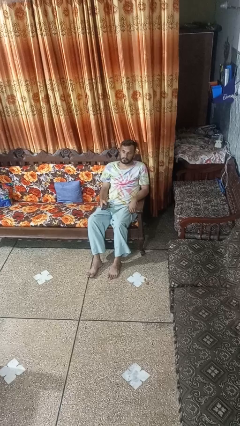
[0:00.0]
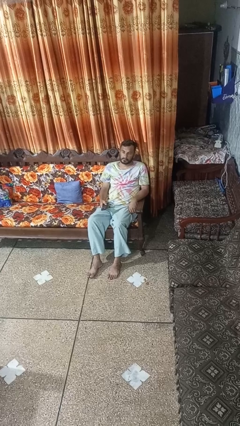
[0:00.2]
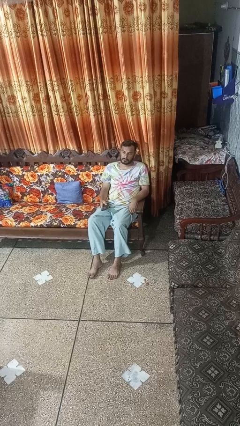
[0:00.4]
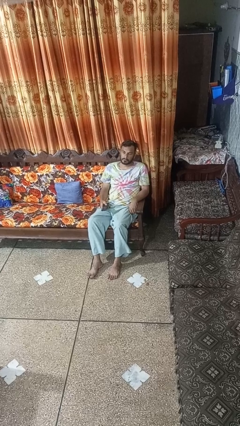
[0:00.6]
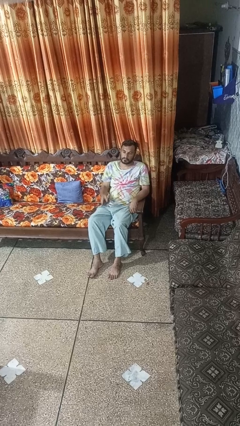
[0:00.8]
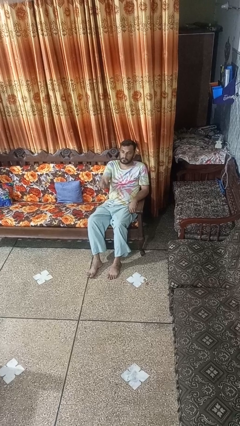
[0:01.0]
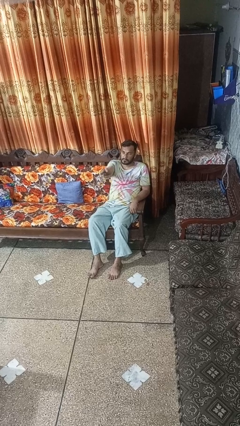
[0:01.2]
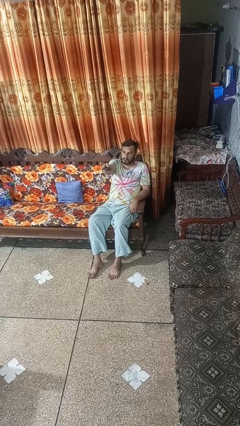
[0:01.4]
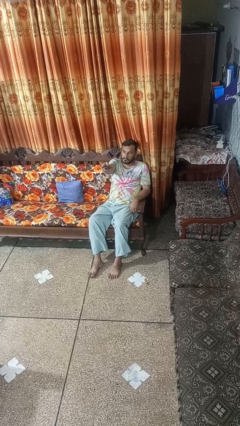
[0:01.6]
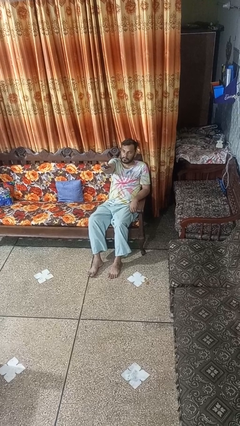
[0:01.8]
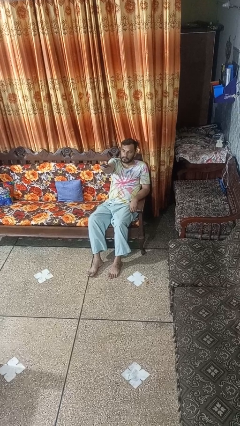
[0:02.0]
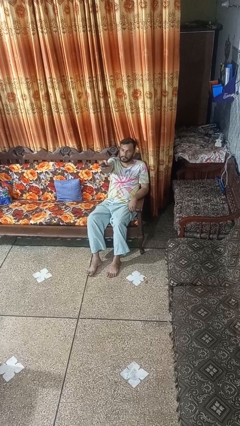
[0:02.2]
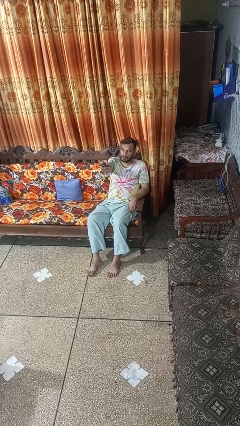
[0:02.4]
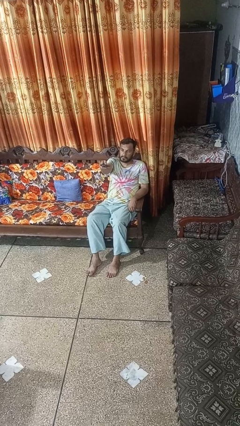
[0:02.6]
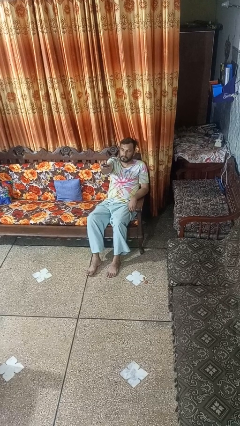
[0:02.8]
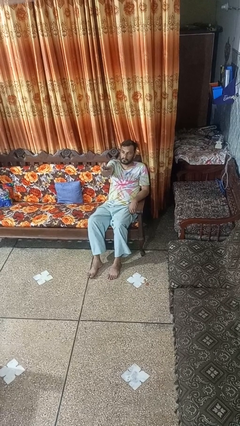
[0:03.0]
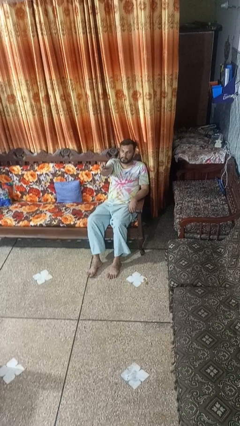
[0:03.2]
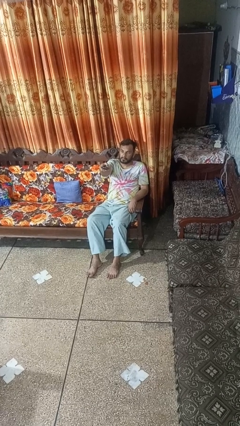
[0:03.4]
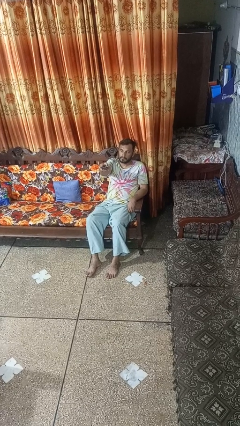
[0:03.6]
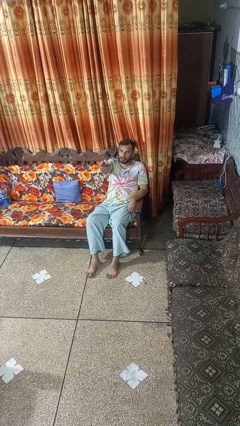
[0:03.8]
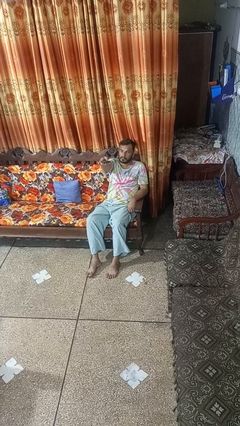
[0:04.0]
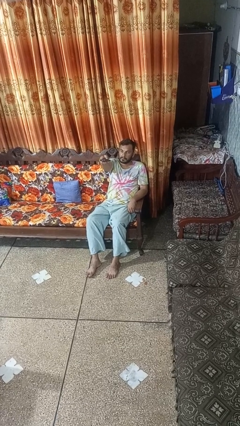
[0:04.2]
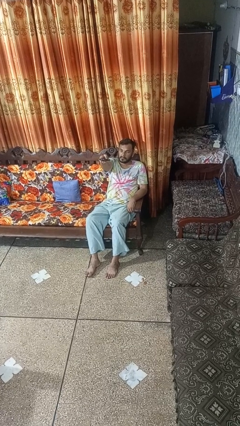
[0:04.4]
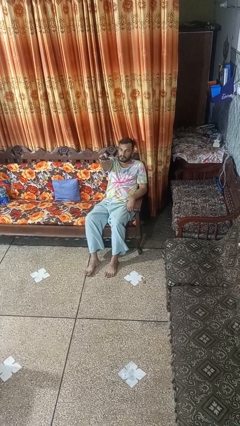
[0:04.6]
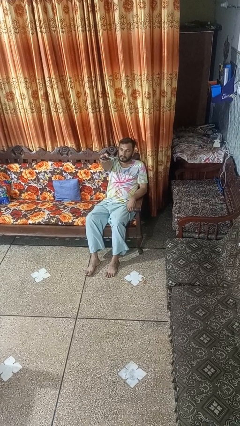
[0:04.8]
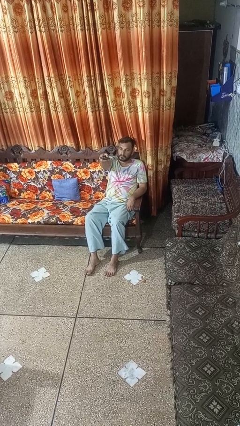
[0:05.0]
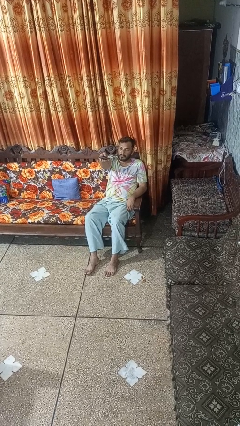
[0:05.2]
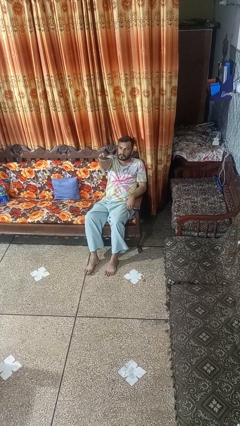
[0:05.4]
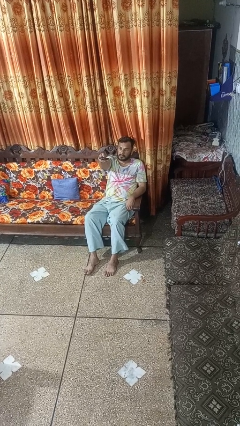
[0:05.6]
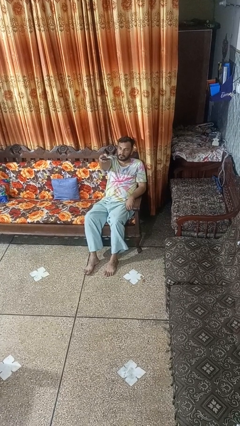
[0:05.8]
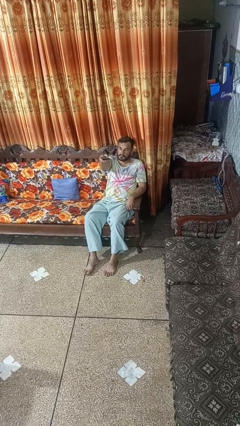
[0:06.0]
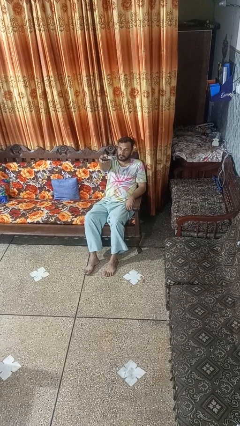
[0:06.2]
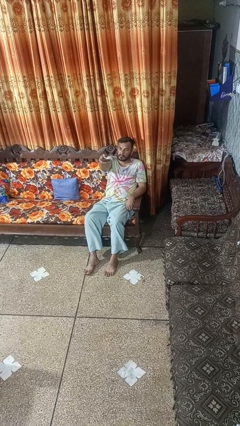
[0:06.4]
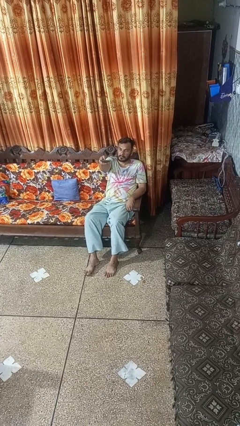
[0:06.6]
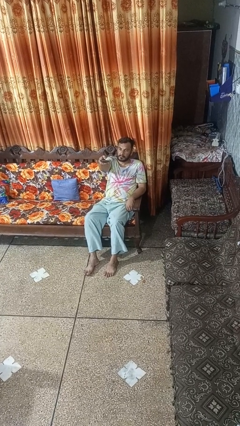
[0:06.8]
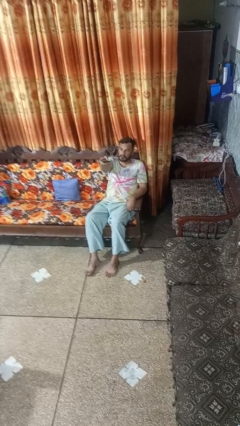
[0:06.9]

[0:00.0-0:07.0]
person uses television remote

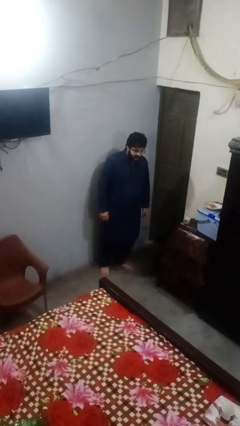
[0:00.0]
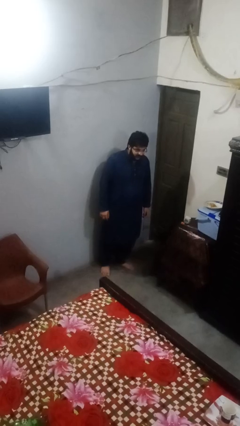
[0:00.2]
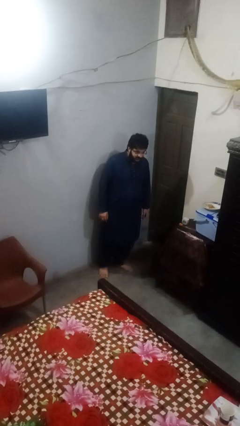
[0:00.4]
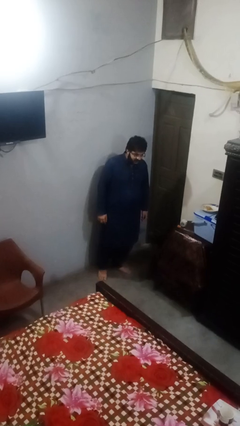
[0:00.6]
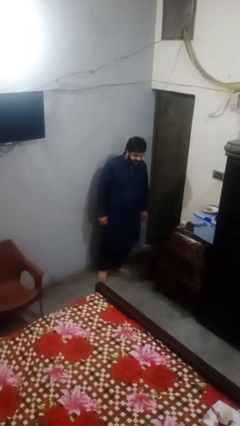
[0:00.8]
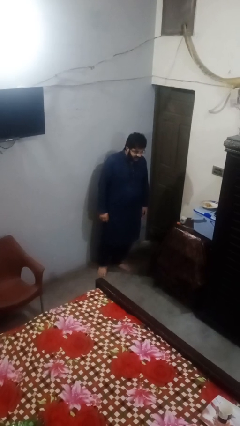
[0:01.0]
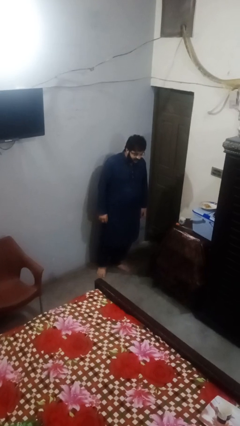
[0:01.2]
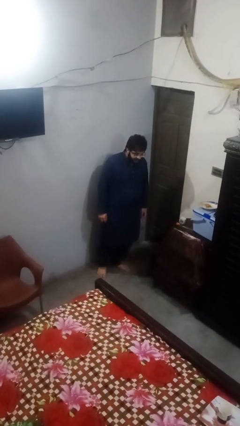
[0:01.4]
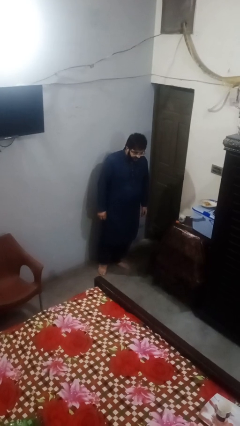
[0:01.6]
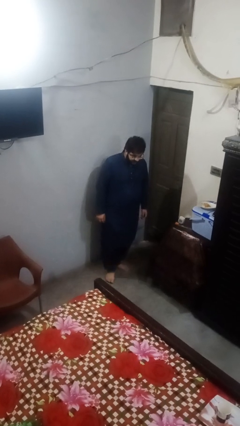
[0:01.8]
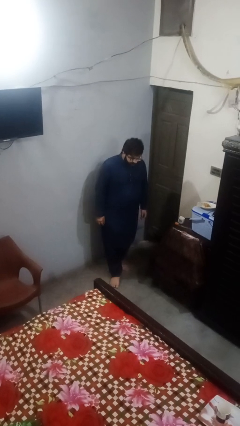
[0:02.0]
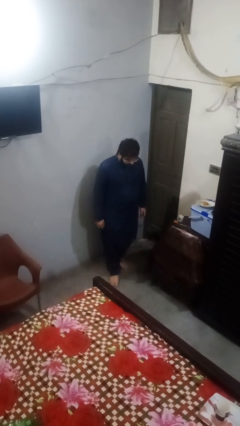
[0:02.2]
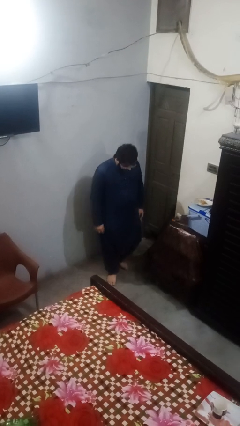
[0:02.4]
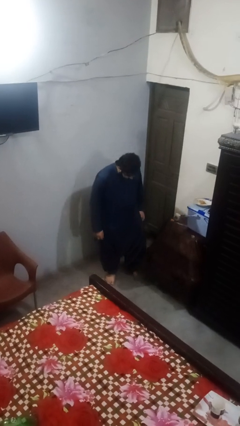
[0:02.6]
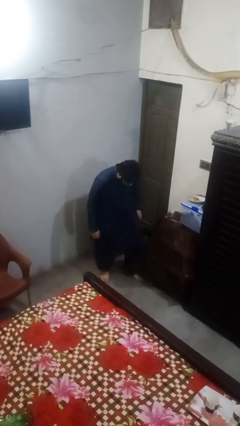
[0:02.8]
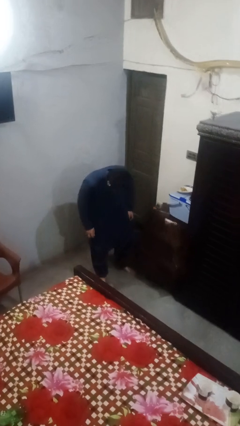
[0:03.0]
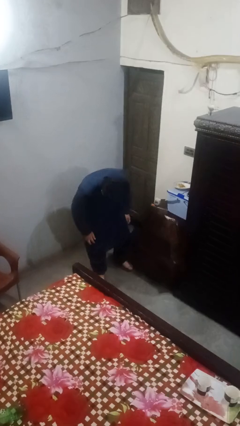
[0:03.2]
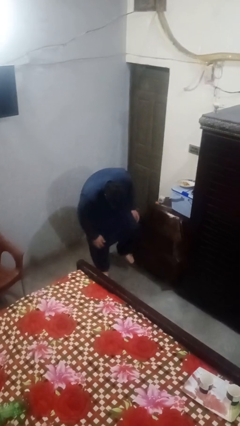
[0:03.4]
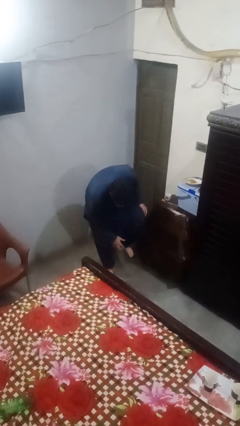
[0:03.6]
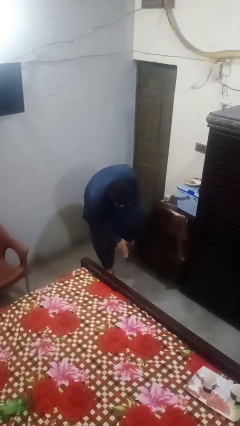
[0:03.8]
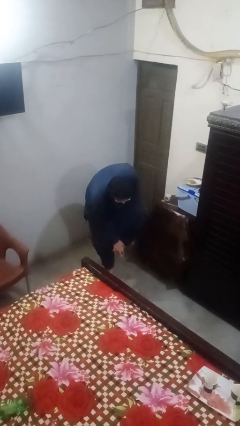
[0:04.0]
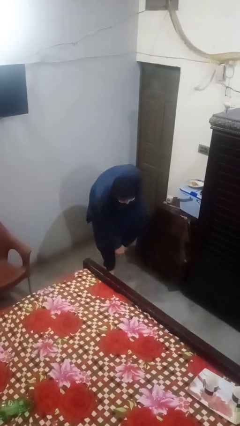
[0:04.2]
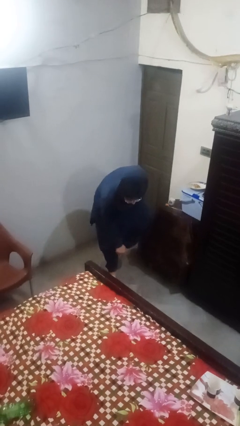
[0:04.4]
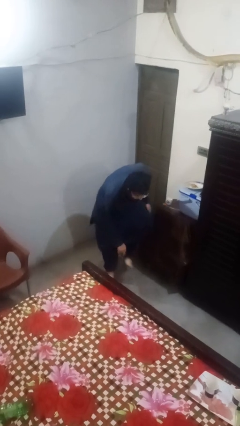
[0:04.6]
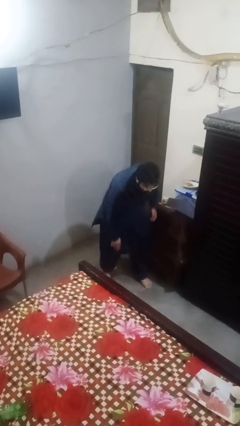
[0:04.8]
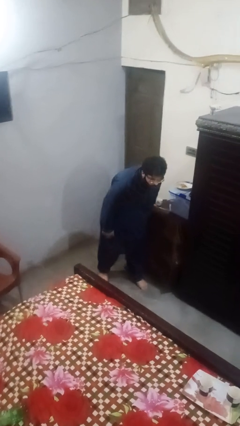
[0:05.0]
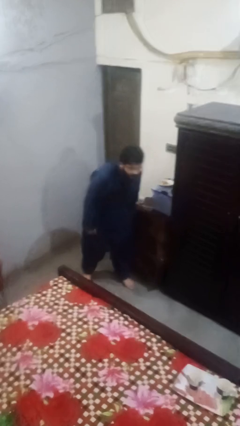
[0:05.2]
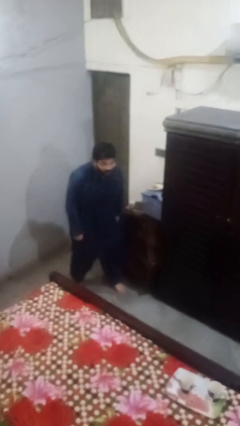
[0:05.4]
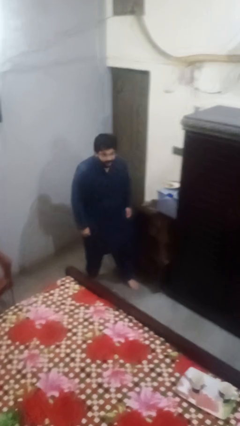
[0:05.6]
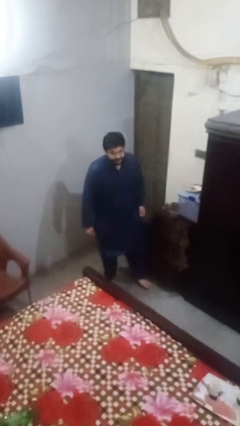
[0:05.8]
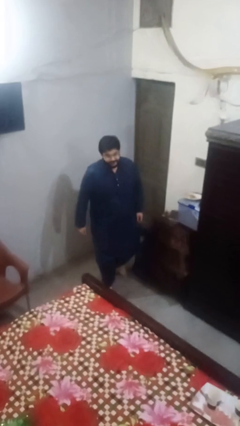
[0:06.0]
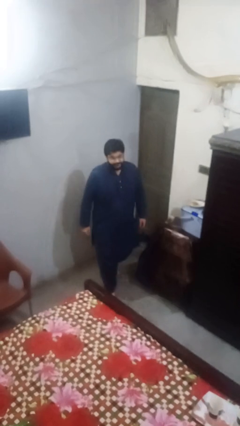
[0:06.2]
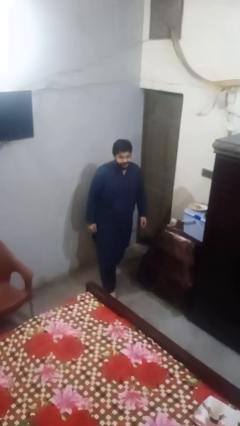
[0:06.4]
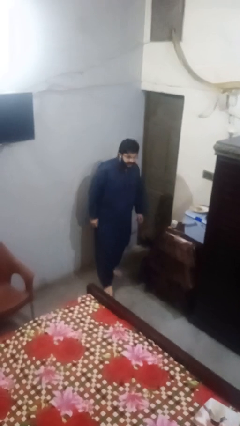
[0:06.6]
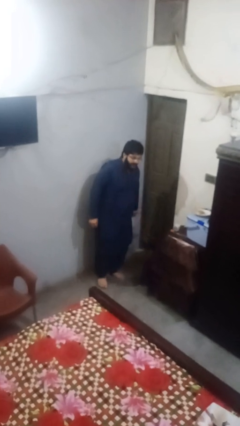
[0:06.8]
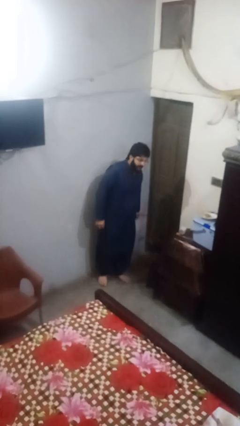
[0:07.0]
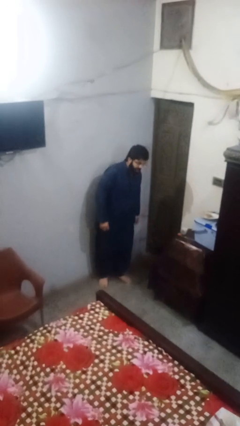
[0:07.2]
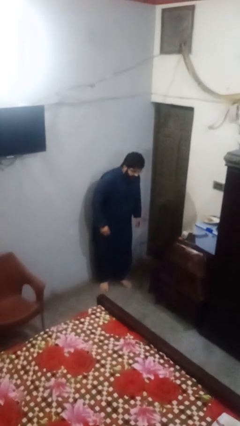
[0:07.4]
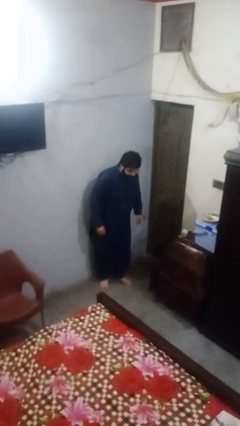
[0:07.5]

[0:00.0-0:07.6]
person stubs toe

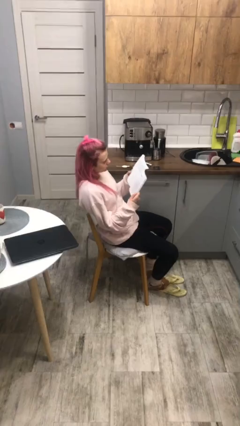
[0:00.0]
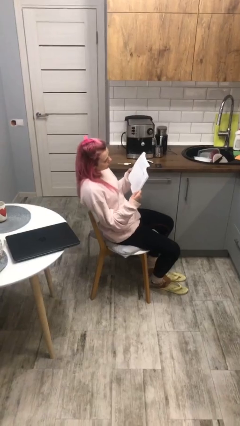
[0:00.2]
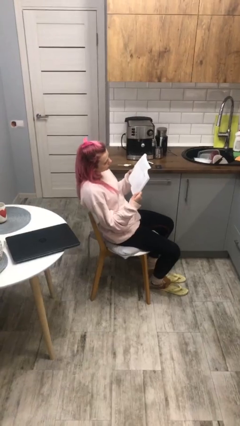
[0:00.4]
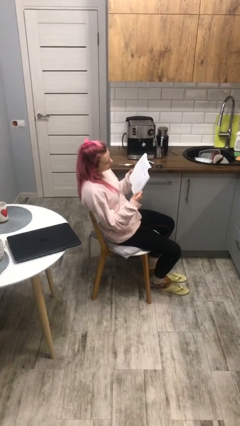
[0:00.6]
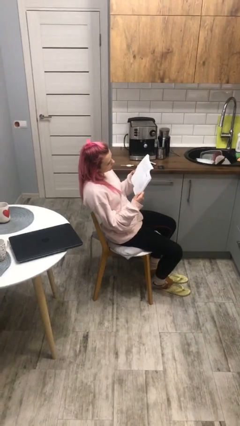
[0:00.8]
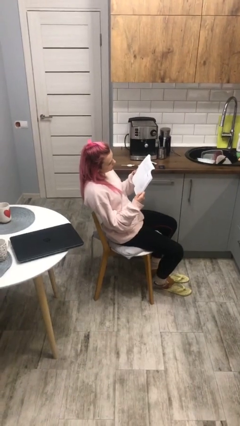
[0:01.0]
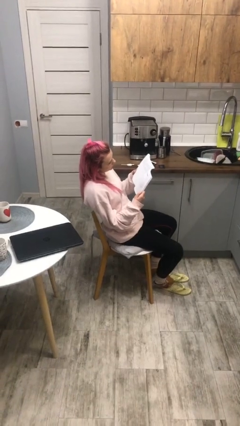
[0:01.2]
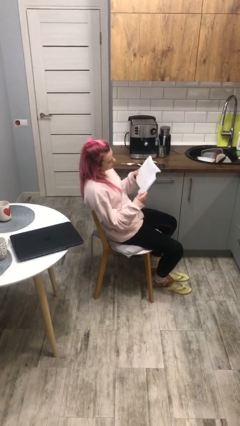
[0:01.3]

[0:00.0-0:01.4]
person reads document

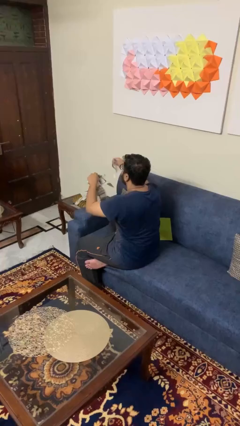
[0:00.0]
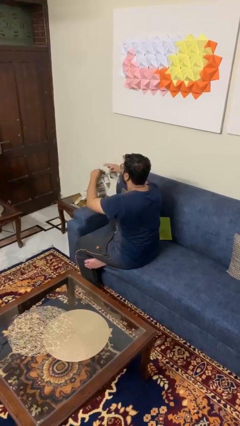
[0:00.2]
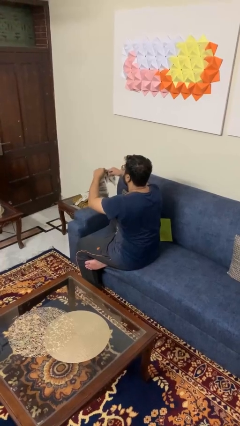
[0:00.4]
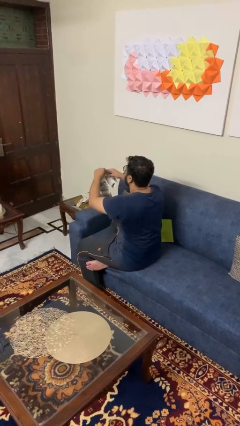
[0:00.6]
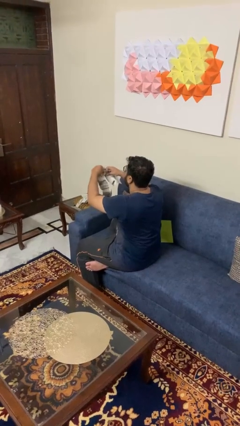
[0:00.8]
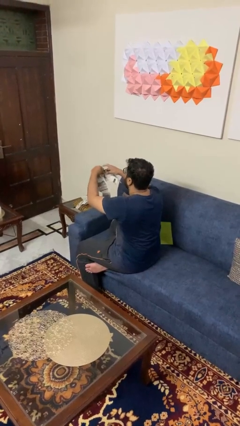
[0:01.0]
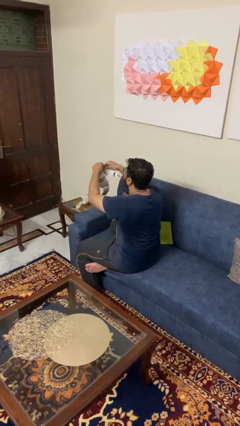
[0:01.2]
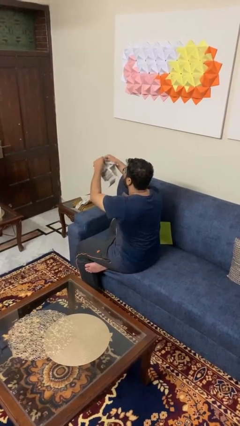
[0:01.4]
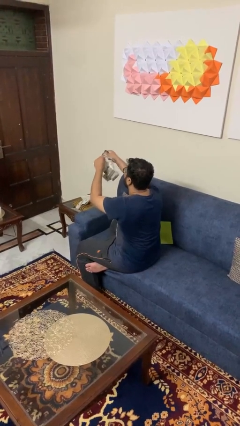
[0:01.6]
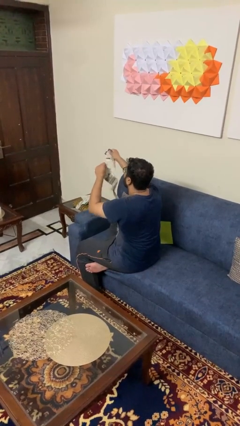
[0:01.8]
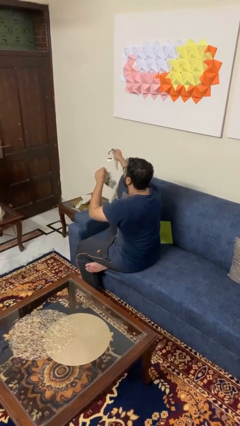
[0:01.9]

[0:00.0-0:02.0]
person tears paper
